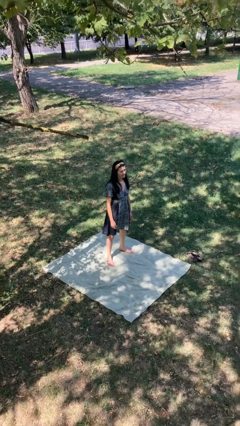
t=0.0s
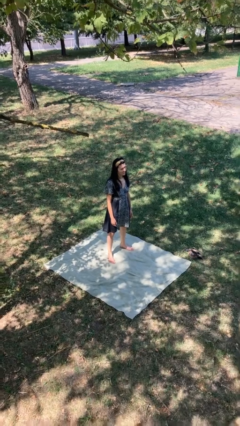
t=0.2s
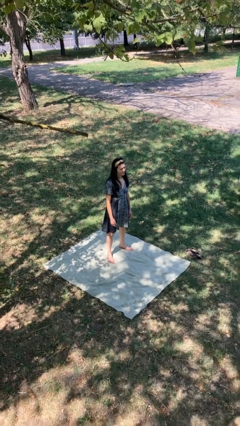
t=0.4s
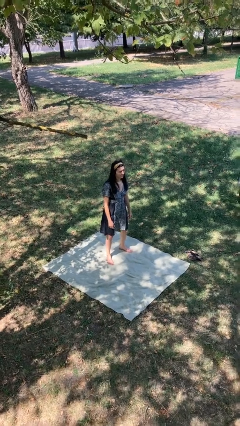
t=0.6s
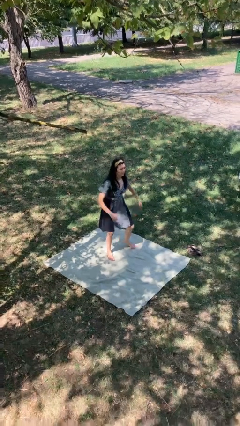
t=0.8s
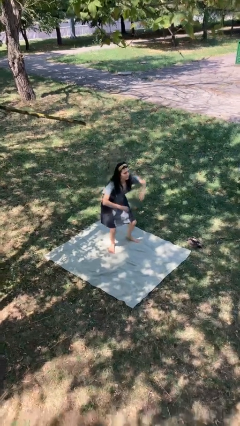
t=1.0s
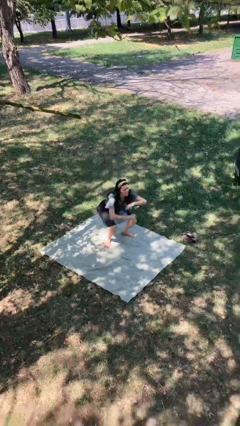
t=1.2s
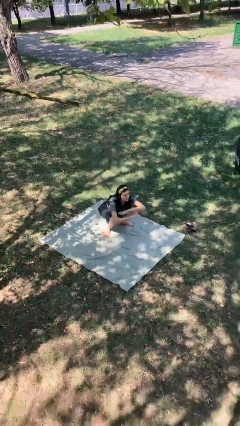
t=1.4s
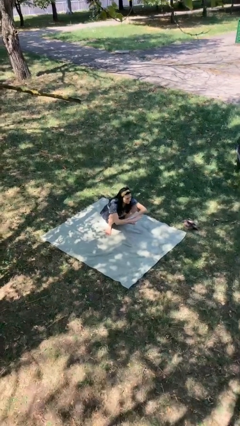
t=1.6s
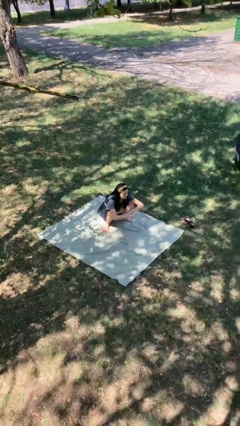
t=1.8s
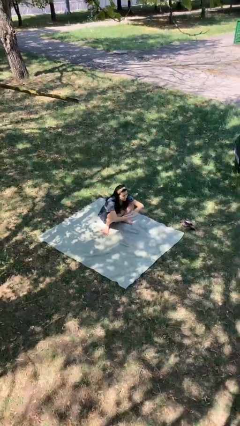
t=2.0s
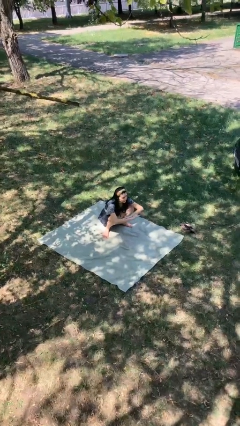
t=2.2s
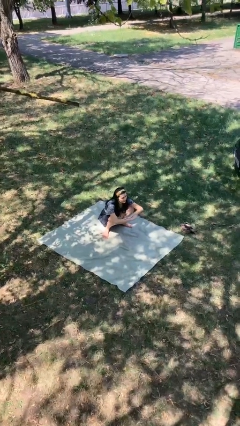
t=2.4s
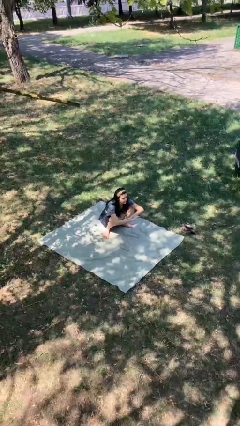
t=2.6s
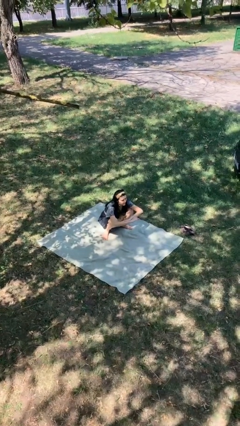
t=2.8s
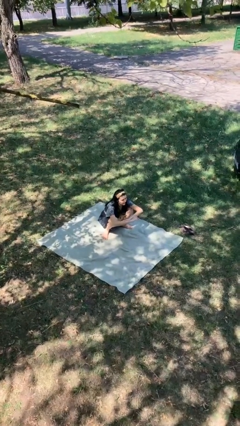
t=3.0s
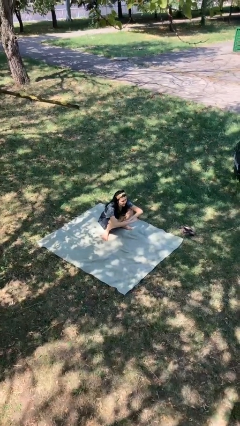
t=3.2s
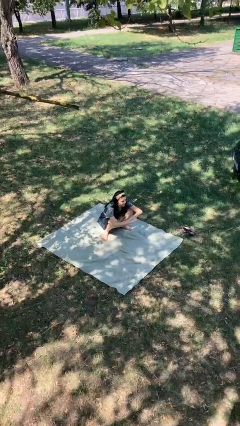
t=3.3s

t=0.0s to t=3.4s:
person squats

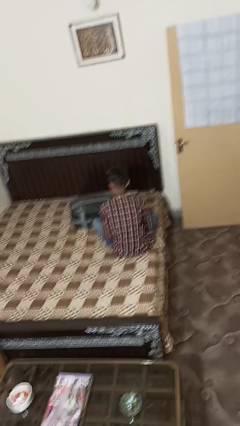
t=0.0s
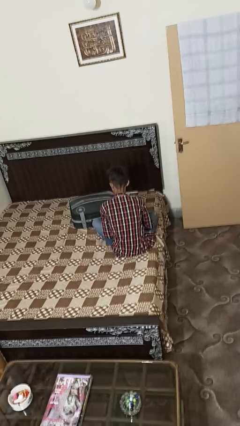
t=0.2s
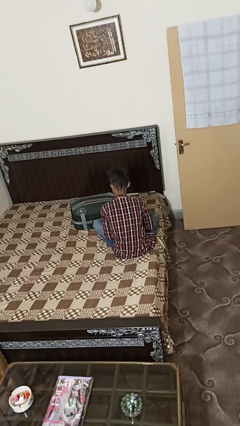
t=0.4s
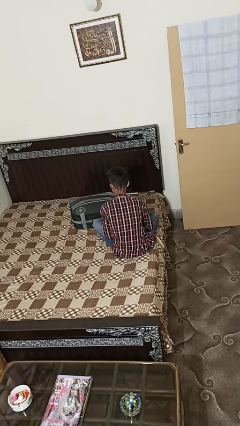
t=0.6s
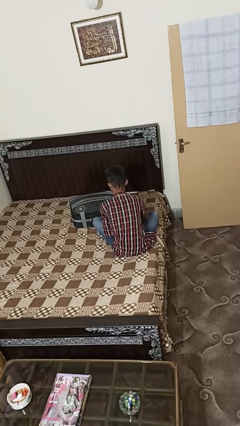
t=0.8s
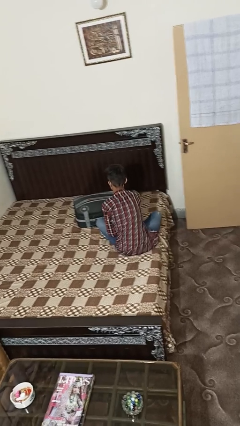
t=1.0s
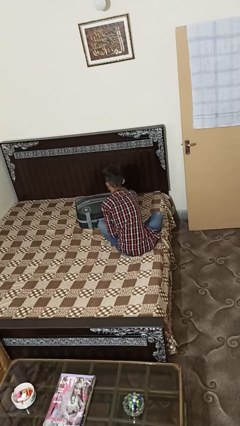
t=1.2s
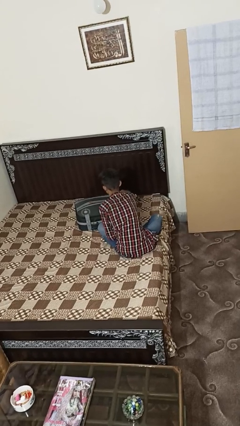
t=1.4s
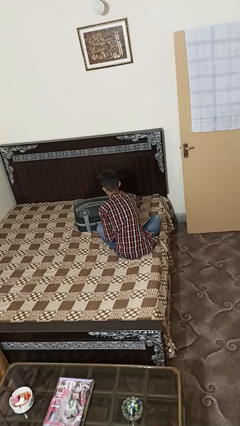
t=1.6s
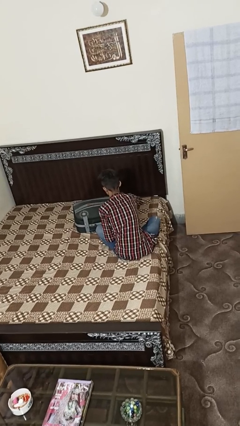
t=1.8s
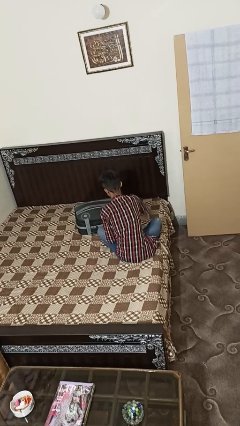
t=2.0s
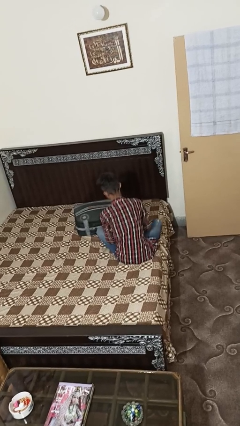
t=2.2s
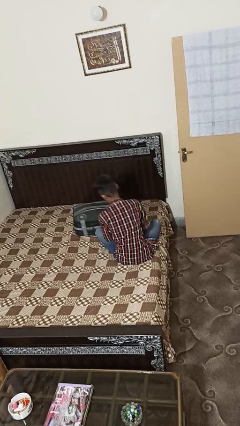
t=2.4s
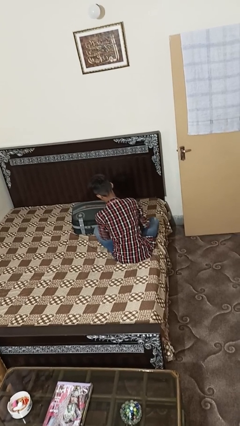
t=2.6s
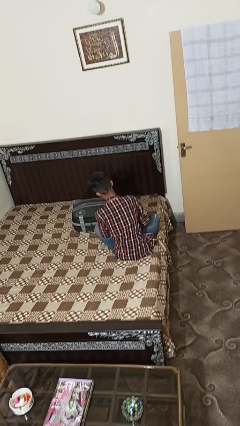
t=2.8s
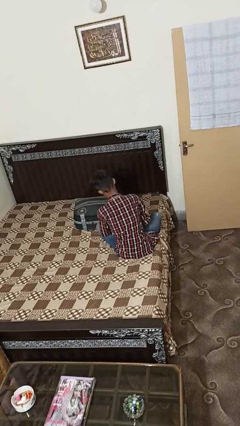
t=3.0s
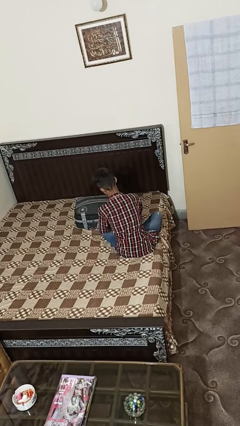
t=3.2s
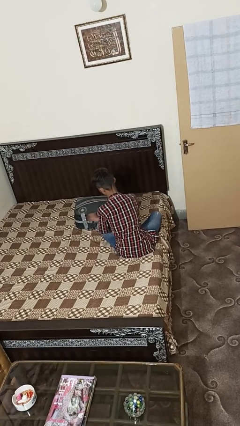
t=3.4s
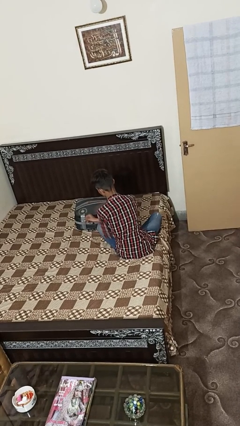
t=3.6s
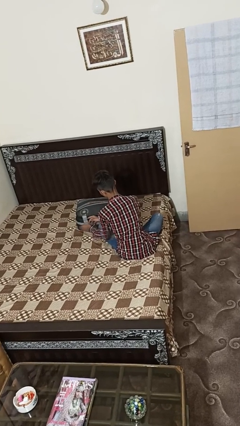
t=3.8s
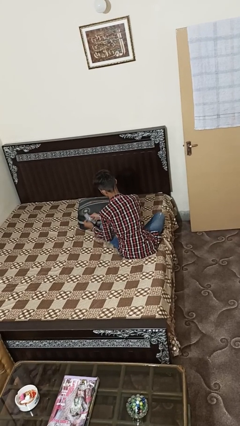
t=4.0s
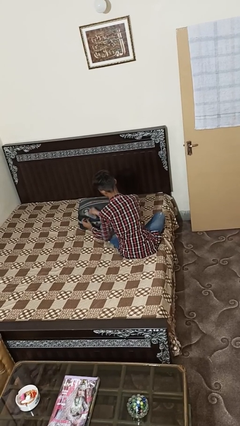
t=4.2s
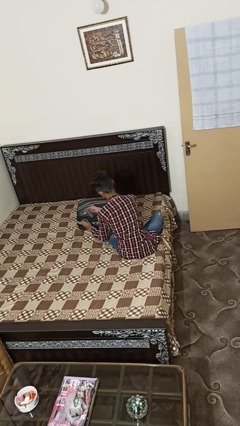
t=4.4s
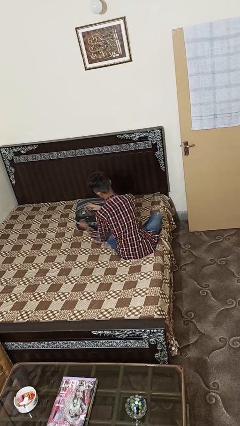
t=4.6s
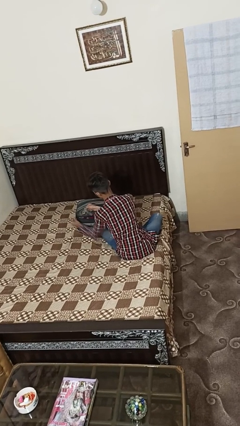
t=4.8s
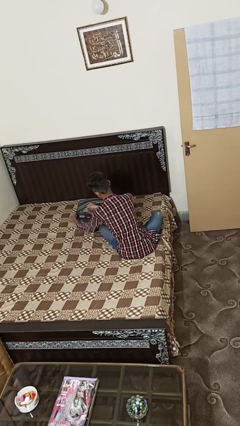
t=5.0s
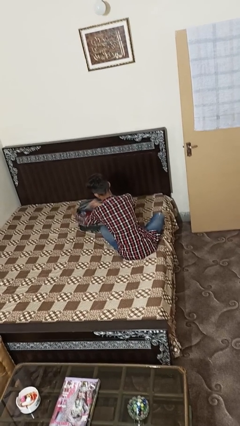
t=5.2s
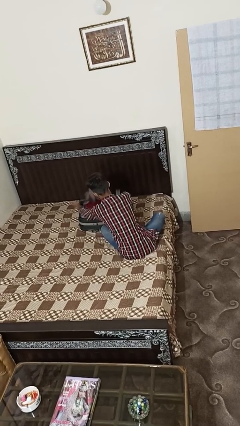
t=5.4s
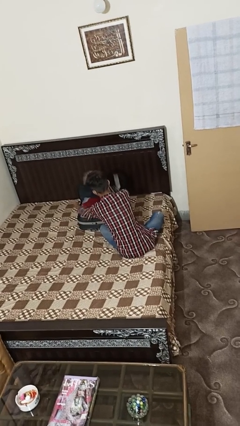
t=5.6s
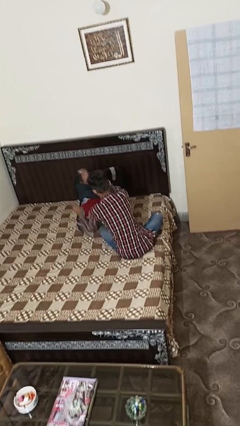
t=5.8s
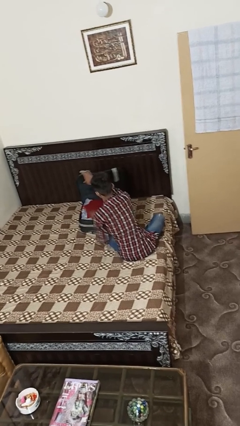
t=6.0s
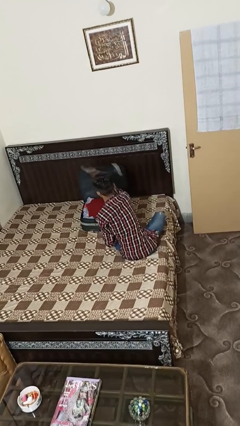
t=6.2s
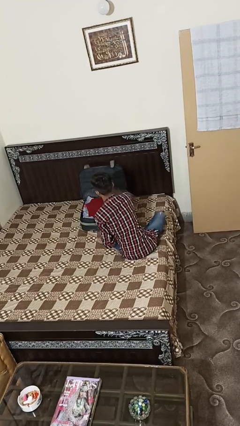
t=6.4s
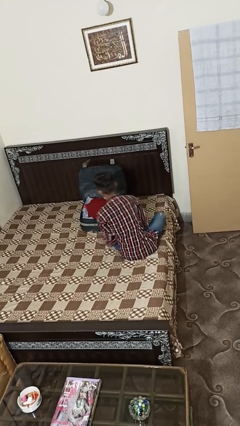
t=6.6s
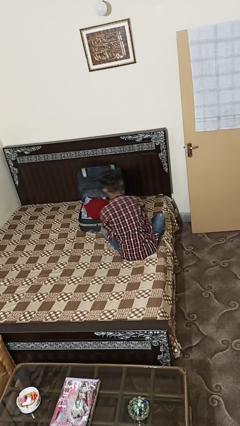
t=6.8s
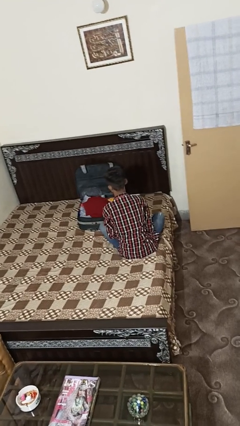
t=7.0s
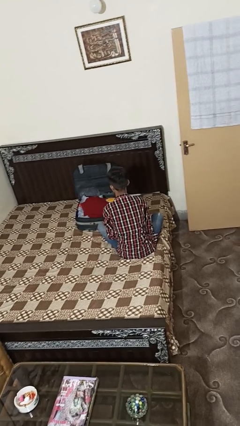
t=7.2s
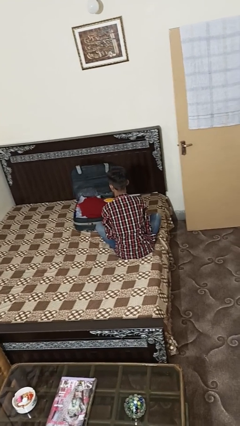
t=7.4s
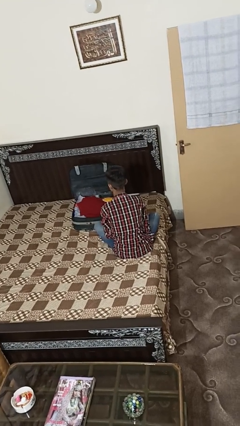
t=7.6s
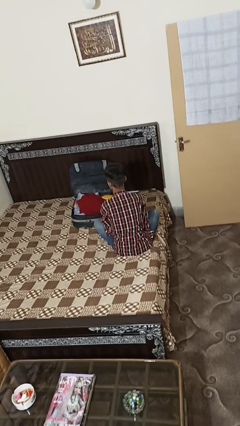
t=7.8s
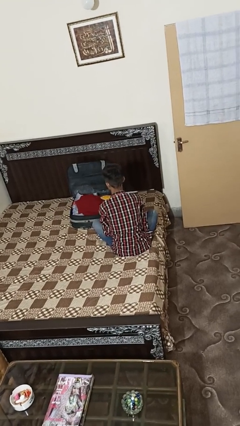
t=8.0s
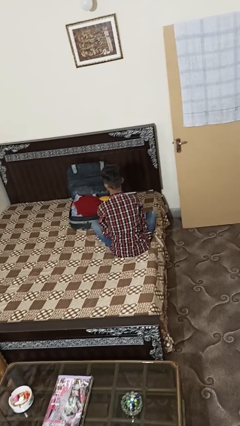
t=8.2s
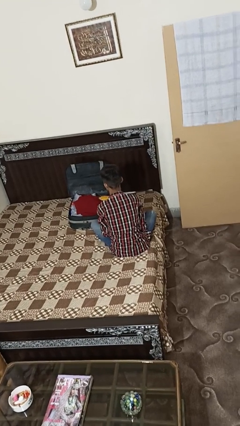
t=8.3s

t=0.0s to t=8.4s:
person opens suitcase

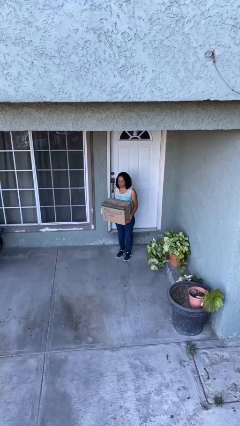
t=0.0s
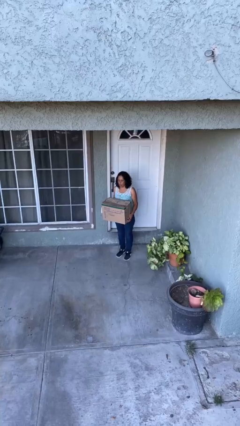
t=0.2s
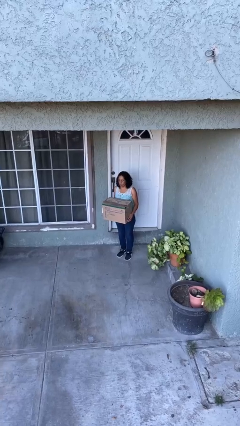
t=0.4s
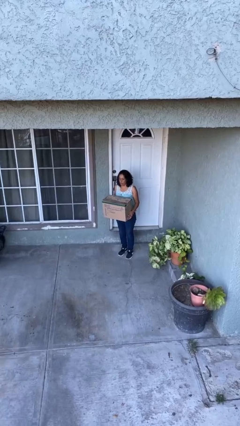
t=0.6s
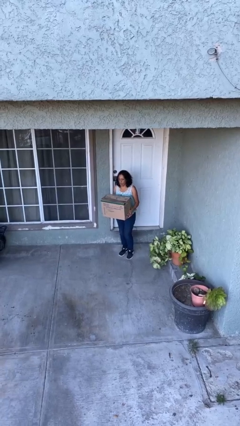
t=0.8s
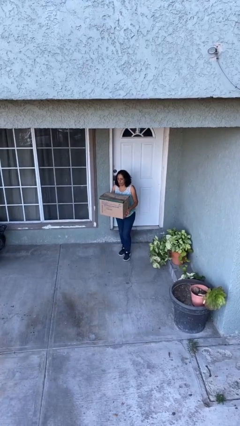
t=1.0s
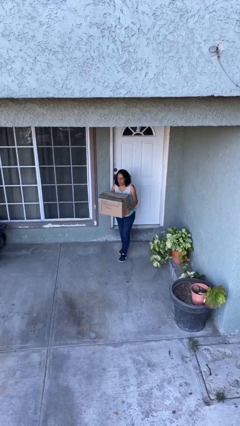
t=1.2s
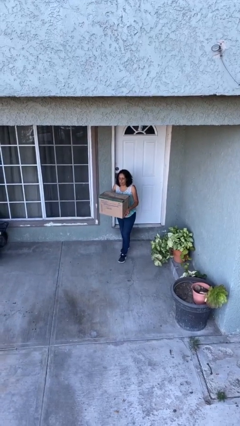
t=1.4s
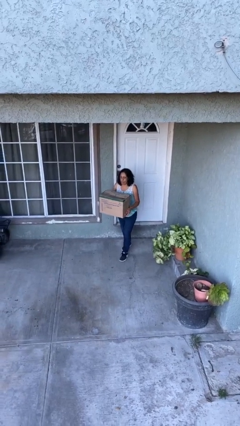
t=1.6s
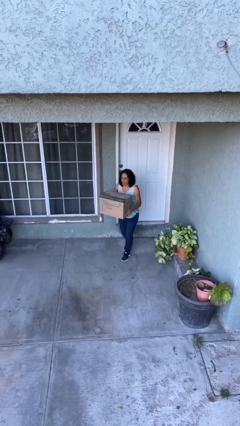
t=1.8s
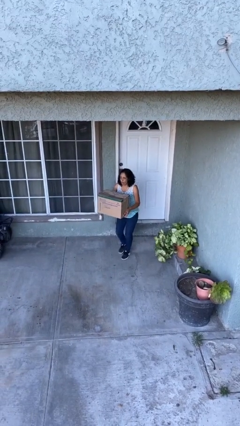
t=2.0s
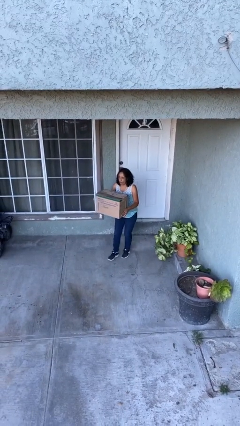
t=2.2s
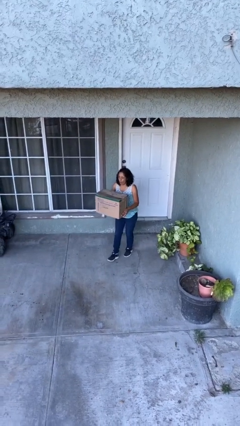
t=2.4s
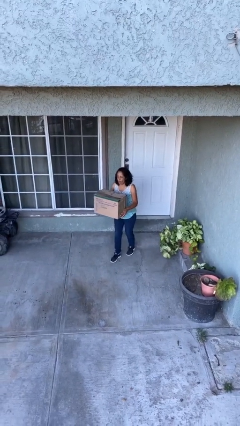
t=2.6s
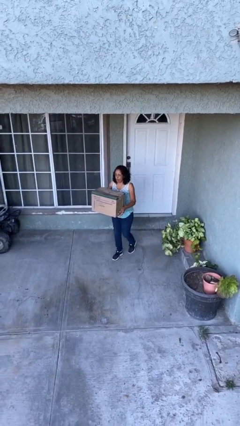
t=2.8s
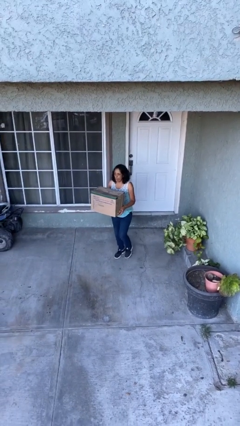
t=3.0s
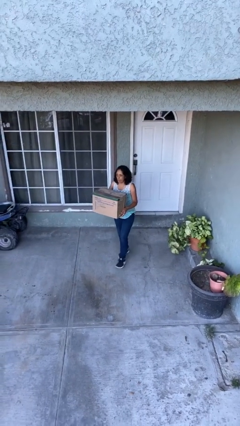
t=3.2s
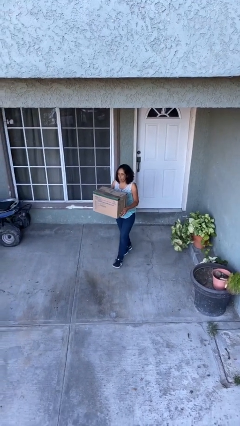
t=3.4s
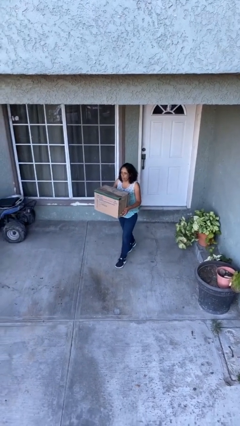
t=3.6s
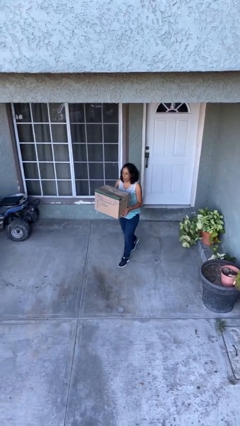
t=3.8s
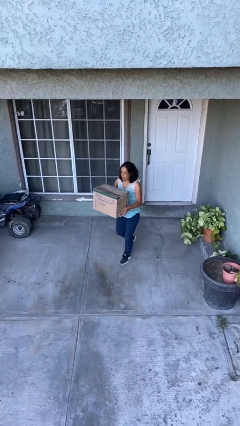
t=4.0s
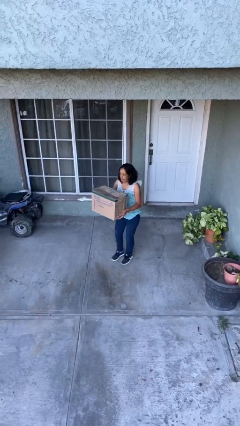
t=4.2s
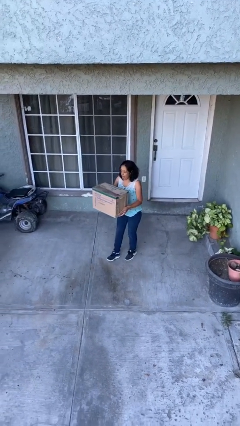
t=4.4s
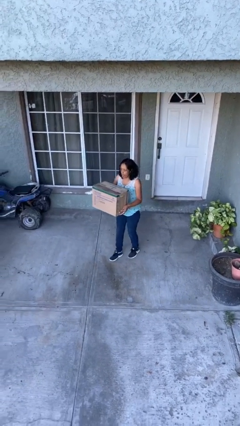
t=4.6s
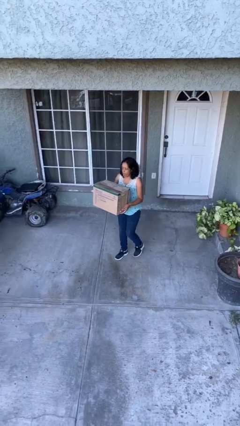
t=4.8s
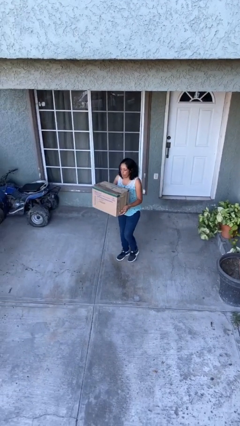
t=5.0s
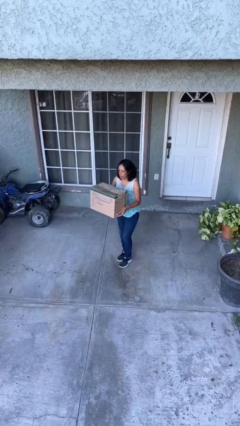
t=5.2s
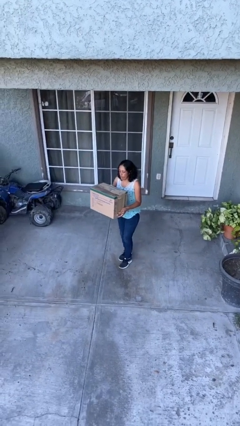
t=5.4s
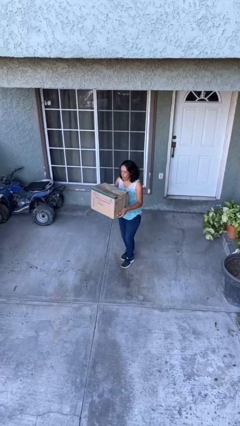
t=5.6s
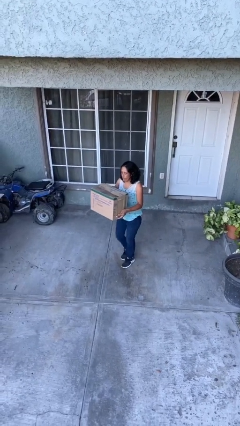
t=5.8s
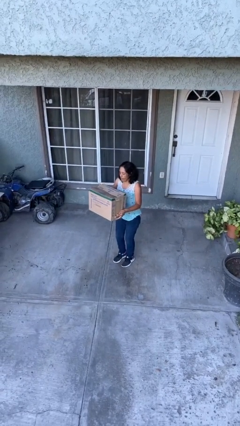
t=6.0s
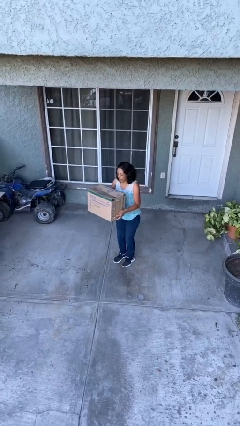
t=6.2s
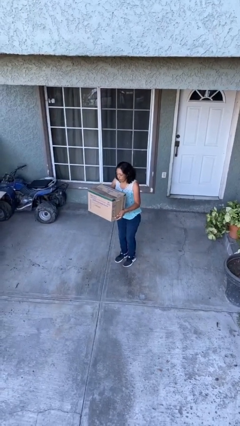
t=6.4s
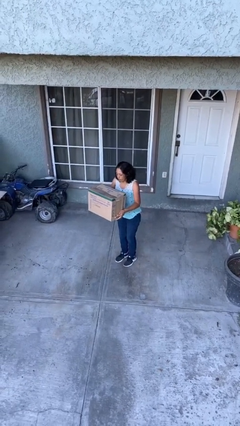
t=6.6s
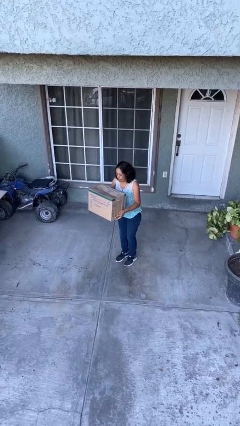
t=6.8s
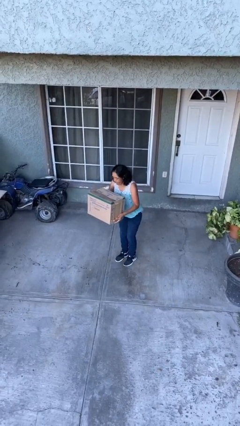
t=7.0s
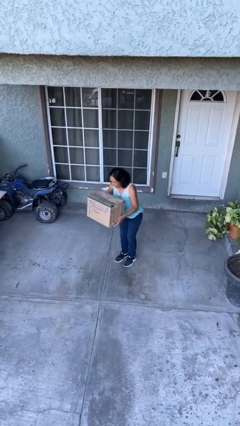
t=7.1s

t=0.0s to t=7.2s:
person carries heavy object
